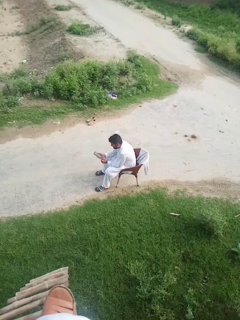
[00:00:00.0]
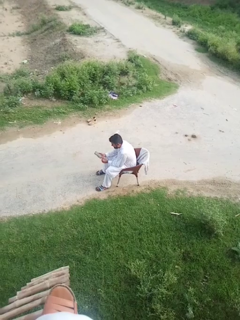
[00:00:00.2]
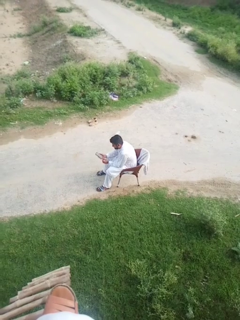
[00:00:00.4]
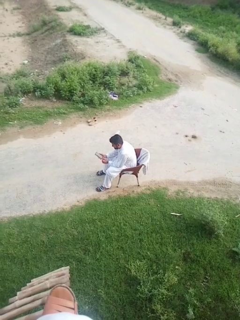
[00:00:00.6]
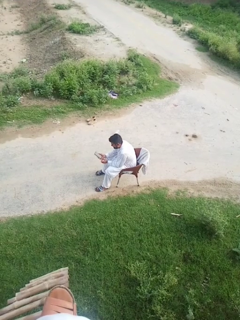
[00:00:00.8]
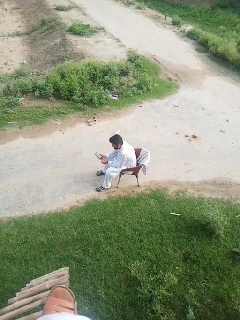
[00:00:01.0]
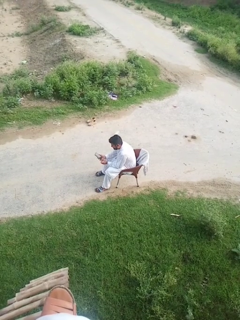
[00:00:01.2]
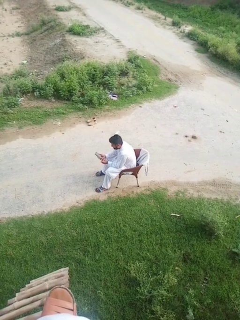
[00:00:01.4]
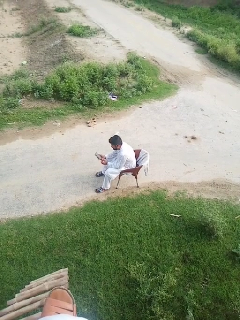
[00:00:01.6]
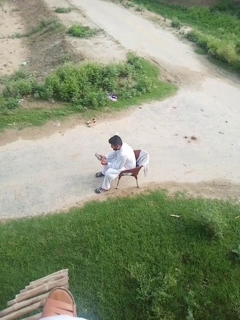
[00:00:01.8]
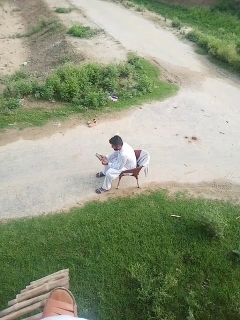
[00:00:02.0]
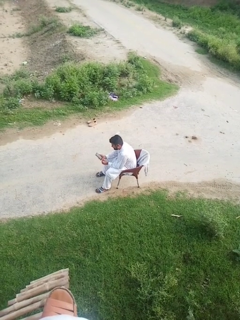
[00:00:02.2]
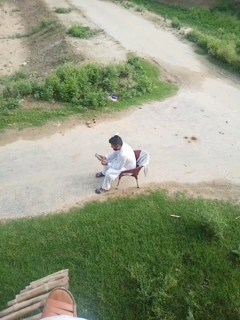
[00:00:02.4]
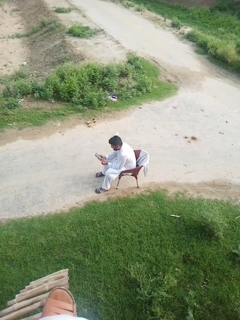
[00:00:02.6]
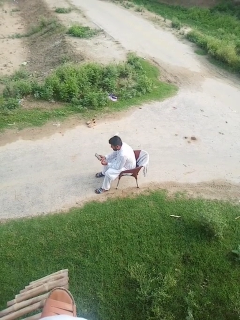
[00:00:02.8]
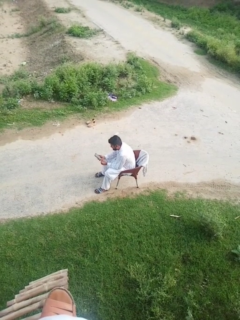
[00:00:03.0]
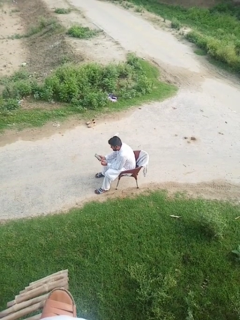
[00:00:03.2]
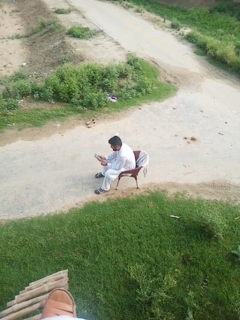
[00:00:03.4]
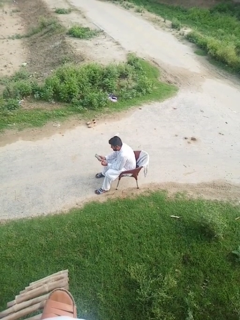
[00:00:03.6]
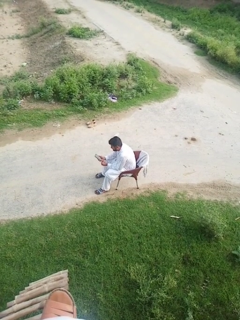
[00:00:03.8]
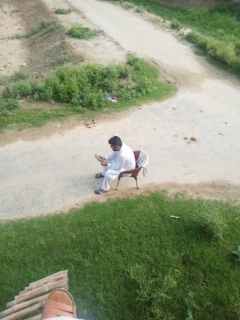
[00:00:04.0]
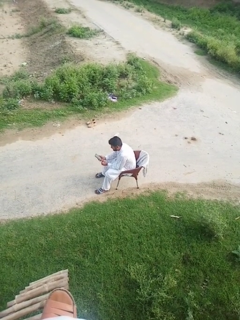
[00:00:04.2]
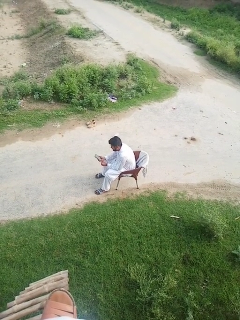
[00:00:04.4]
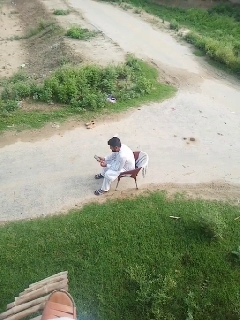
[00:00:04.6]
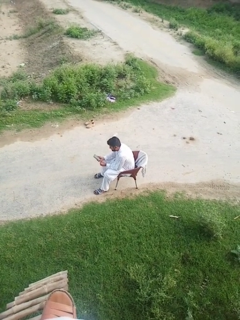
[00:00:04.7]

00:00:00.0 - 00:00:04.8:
person puts on headphones

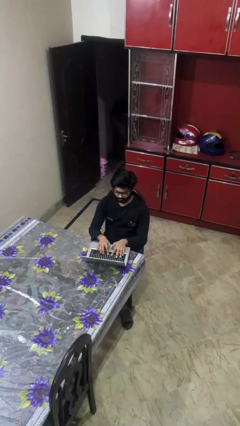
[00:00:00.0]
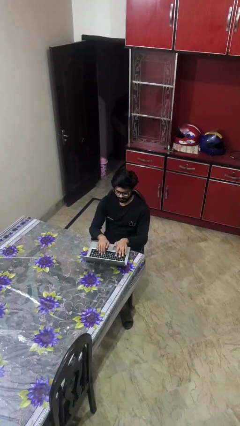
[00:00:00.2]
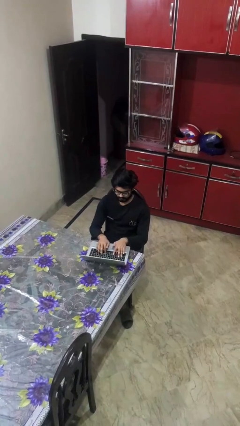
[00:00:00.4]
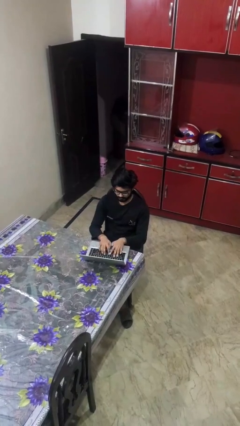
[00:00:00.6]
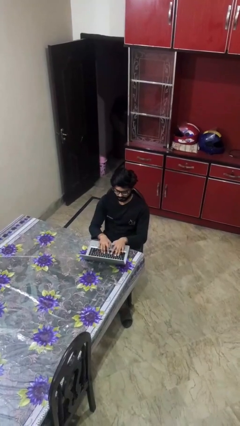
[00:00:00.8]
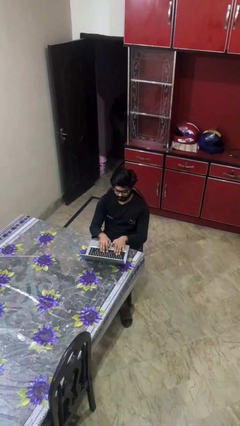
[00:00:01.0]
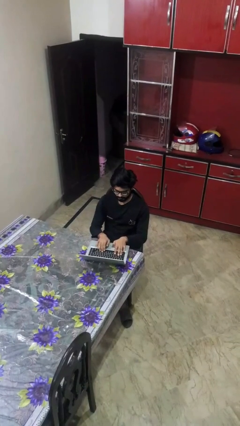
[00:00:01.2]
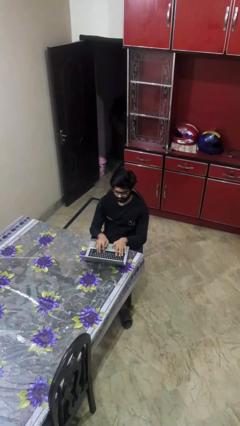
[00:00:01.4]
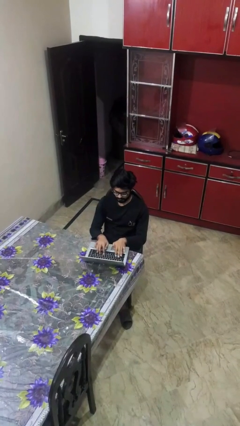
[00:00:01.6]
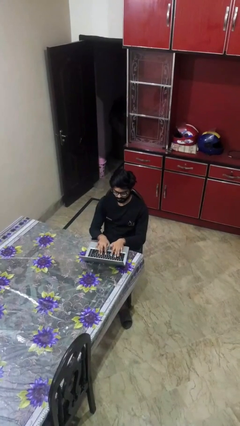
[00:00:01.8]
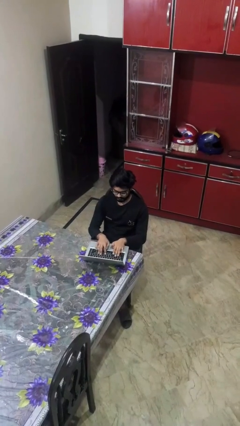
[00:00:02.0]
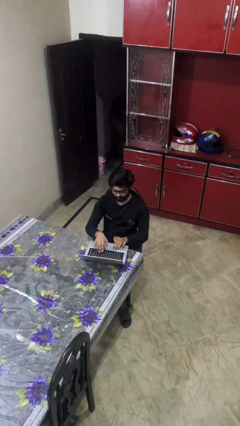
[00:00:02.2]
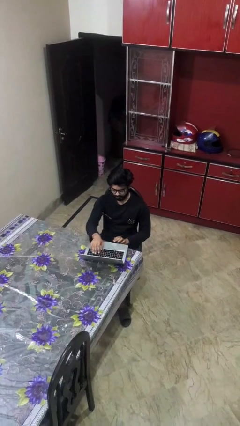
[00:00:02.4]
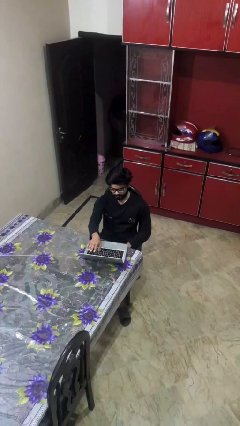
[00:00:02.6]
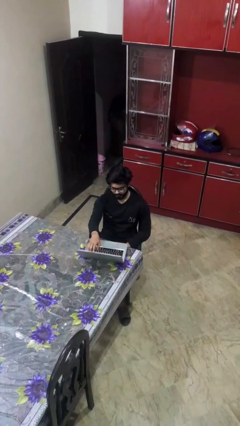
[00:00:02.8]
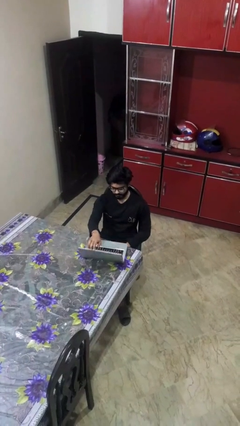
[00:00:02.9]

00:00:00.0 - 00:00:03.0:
person interacts with laptop

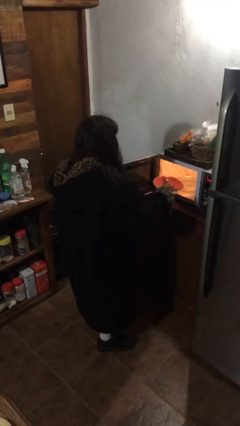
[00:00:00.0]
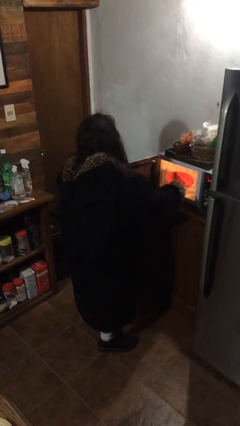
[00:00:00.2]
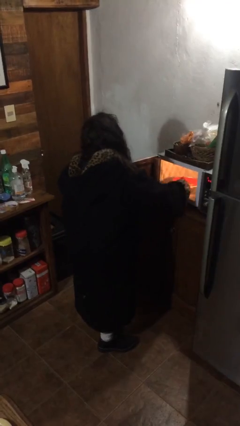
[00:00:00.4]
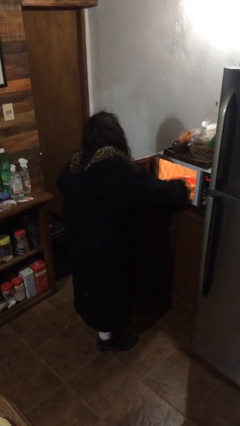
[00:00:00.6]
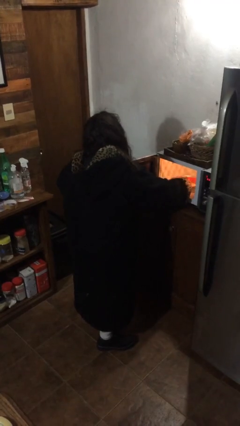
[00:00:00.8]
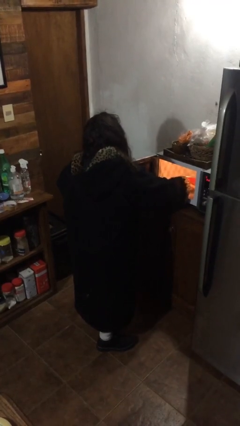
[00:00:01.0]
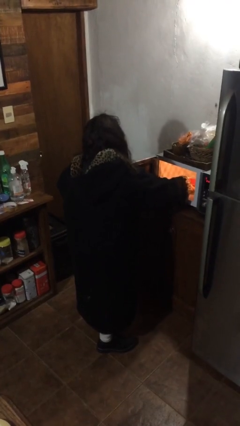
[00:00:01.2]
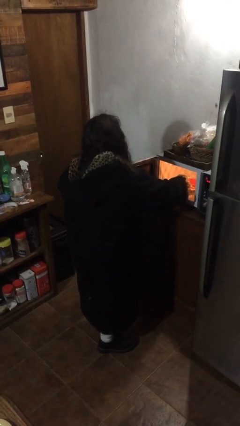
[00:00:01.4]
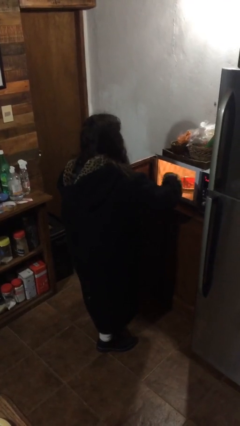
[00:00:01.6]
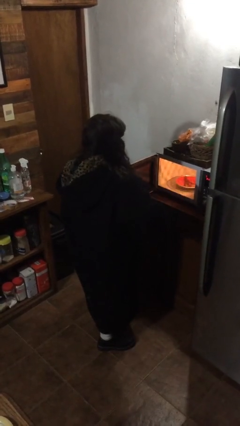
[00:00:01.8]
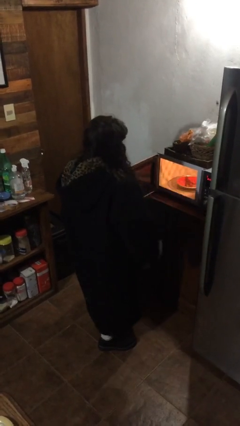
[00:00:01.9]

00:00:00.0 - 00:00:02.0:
person puts object into microwave

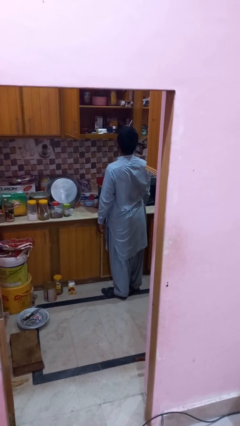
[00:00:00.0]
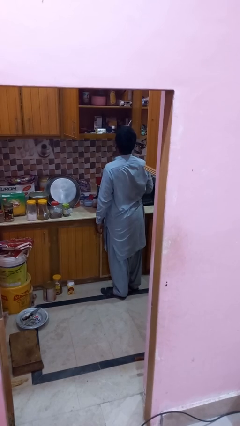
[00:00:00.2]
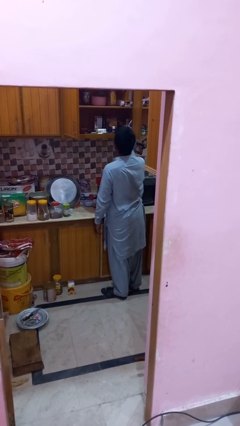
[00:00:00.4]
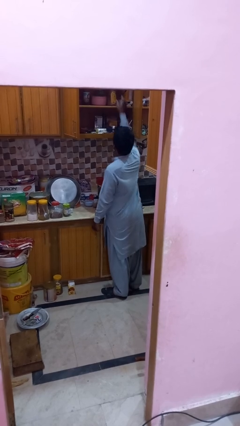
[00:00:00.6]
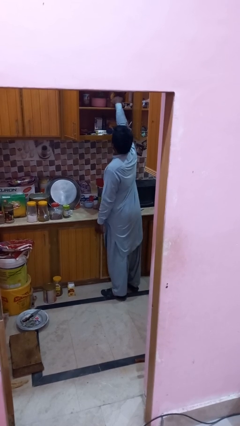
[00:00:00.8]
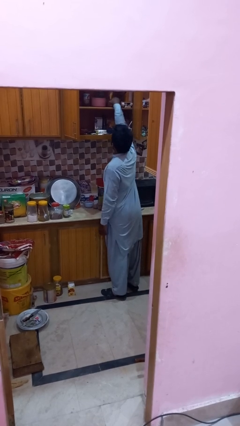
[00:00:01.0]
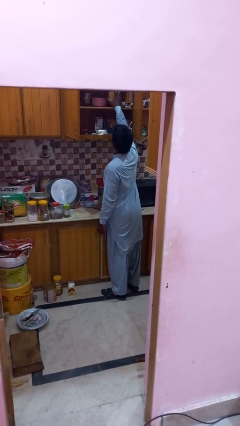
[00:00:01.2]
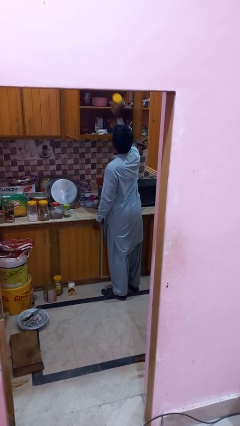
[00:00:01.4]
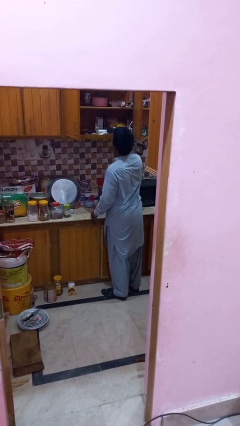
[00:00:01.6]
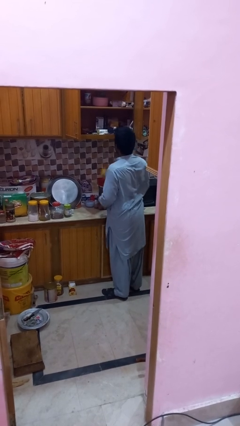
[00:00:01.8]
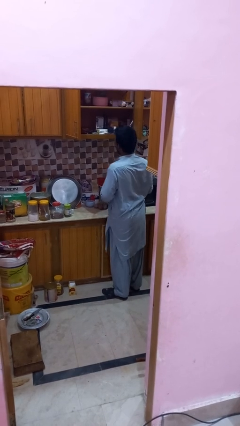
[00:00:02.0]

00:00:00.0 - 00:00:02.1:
person takes object from cabinet

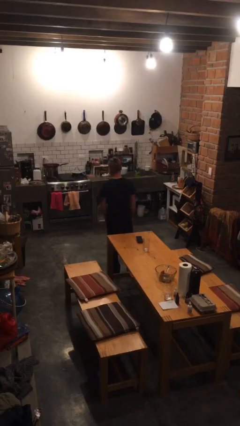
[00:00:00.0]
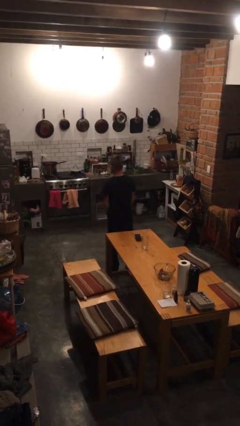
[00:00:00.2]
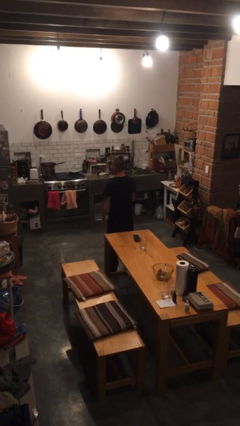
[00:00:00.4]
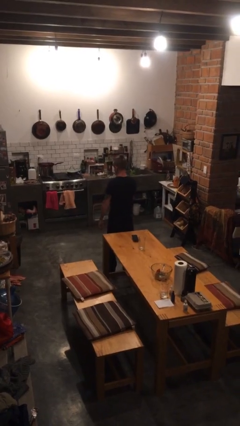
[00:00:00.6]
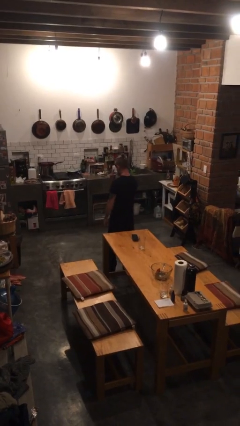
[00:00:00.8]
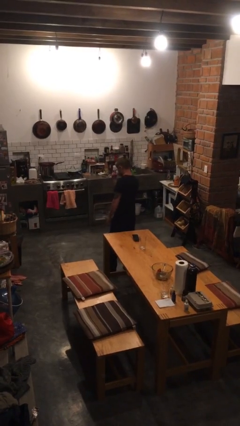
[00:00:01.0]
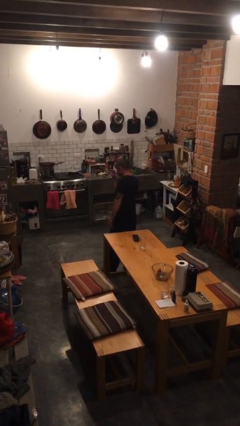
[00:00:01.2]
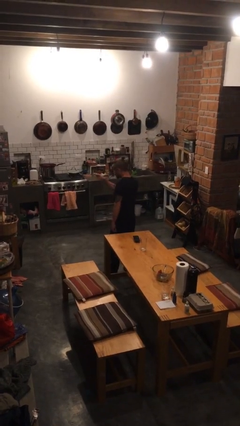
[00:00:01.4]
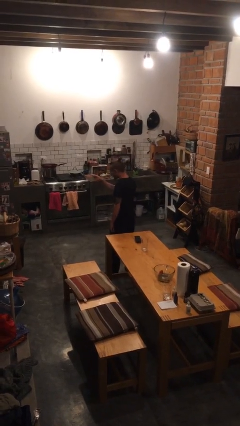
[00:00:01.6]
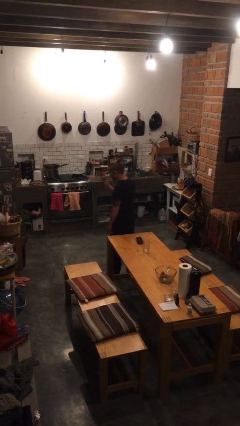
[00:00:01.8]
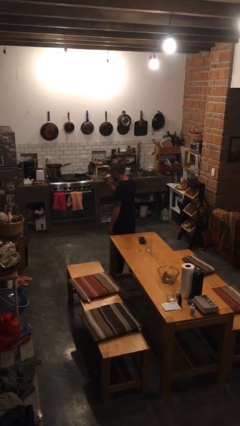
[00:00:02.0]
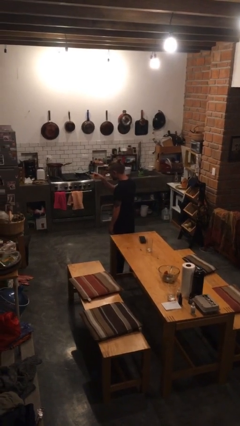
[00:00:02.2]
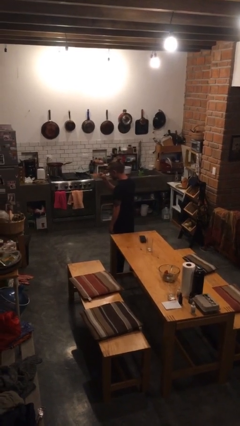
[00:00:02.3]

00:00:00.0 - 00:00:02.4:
person gestures watch closely

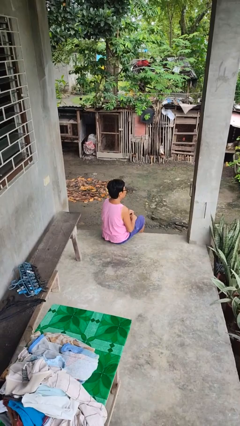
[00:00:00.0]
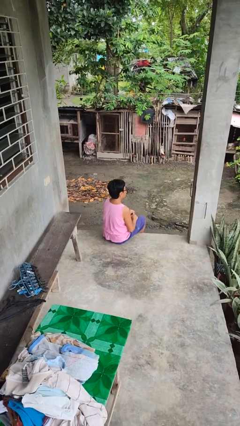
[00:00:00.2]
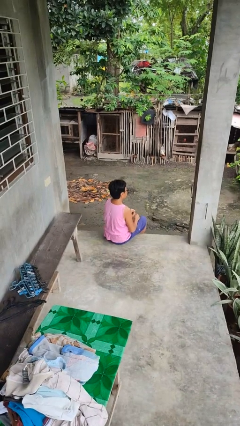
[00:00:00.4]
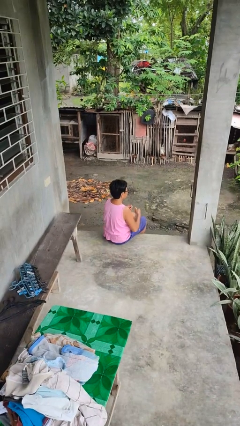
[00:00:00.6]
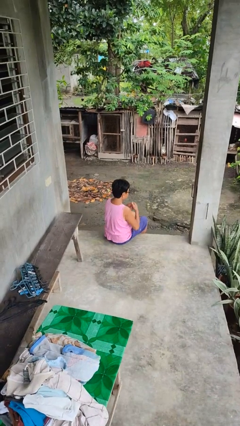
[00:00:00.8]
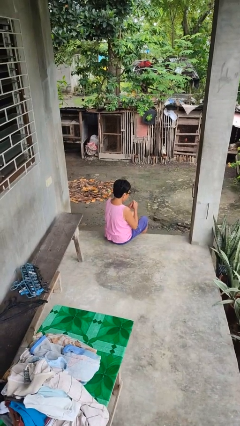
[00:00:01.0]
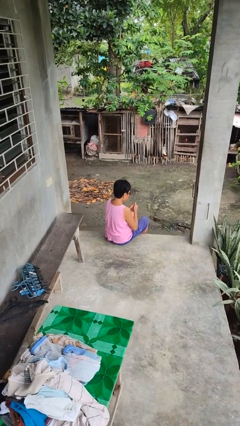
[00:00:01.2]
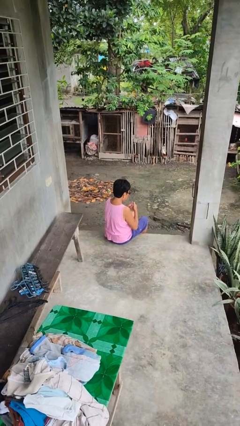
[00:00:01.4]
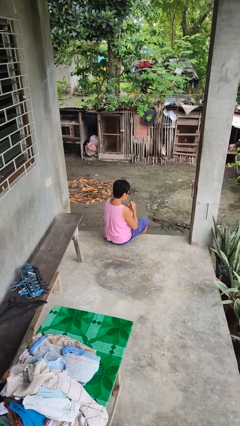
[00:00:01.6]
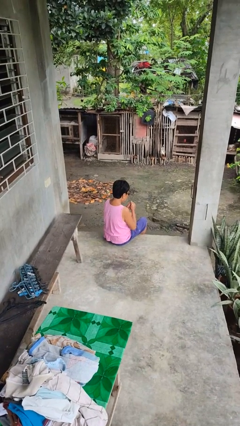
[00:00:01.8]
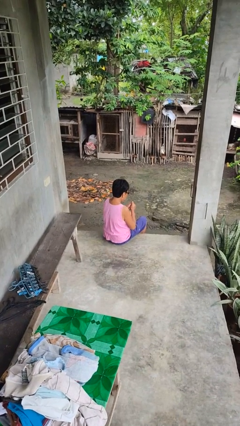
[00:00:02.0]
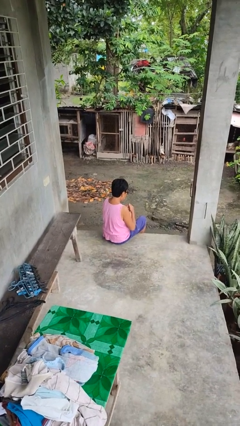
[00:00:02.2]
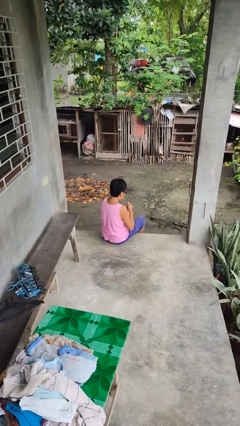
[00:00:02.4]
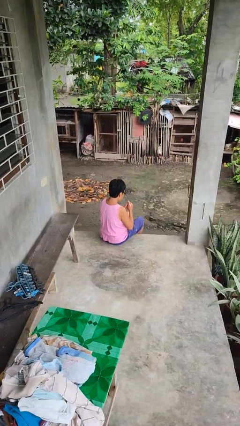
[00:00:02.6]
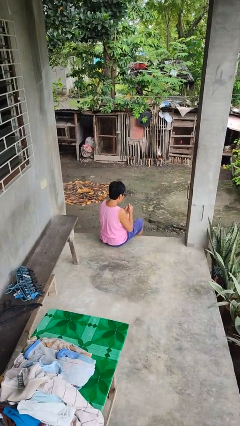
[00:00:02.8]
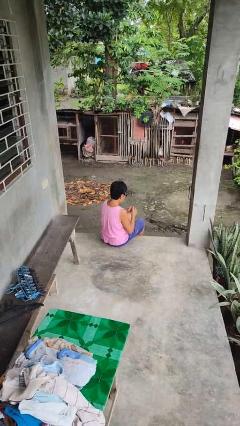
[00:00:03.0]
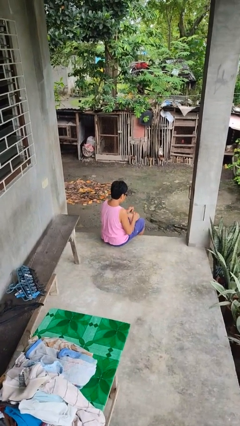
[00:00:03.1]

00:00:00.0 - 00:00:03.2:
person cracks knuckles

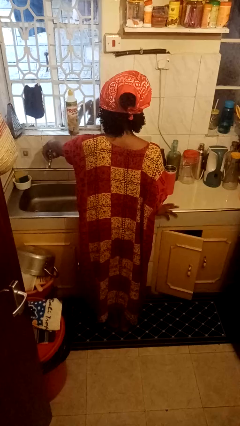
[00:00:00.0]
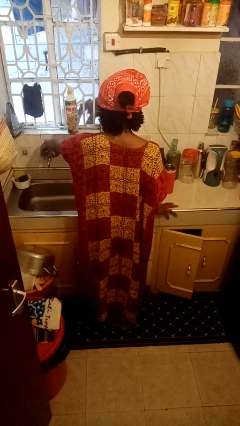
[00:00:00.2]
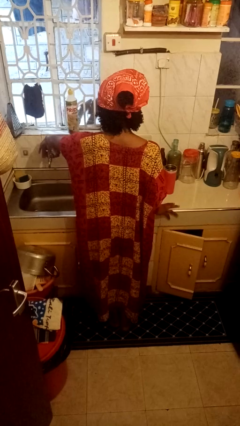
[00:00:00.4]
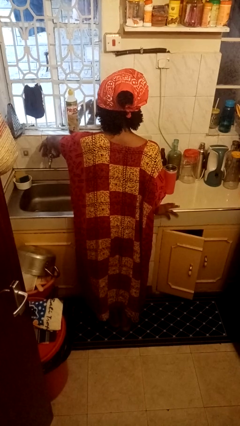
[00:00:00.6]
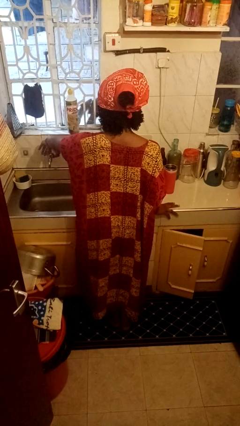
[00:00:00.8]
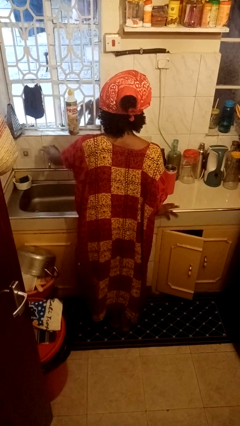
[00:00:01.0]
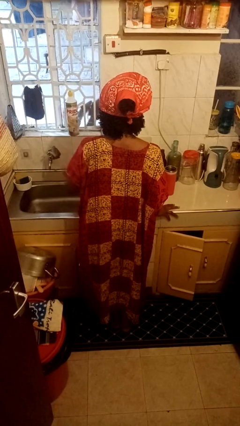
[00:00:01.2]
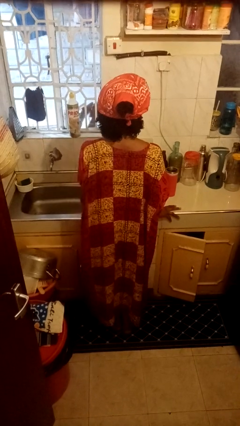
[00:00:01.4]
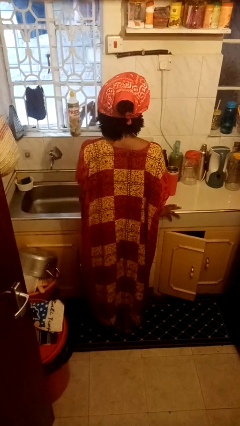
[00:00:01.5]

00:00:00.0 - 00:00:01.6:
person turns off faucet
